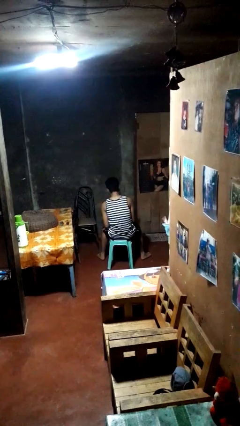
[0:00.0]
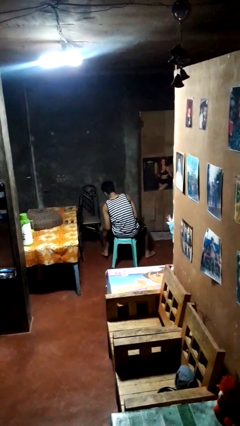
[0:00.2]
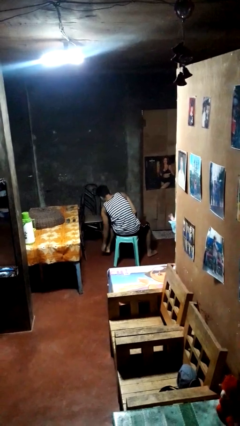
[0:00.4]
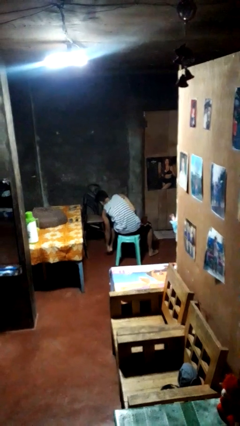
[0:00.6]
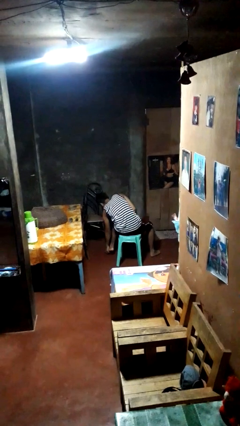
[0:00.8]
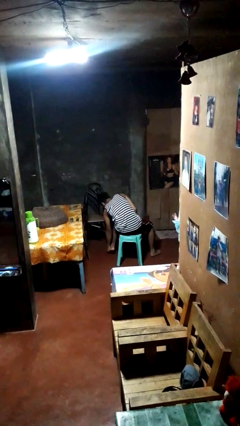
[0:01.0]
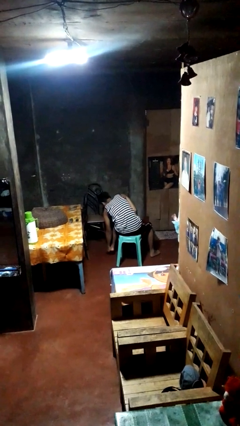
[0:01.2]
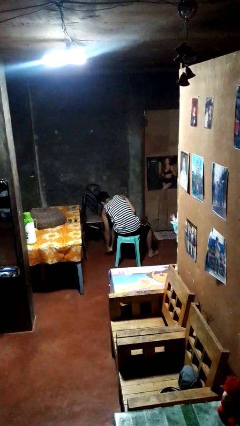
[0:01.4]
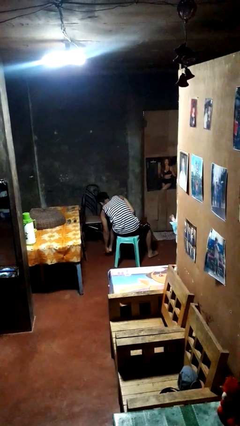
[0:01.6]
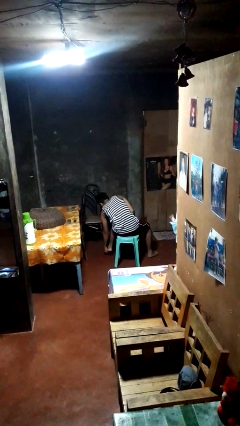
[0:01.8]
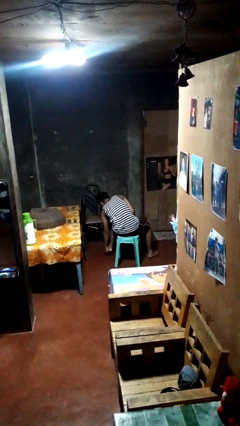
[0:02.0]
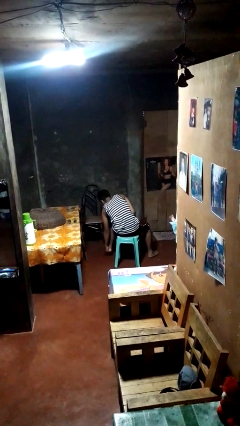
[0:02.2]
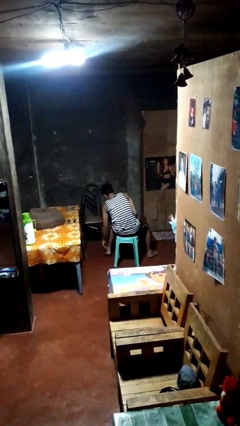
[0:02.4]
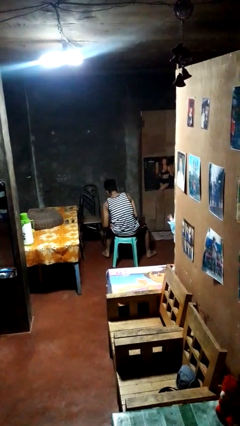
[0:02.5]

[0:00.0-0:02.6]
person rubs foot

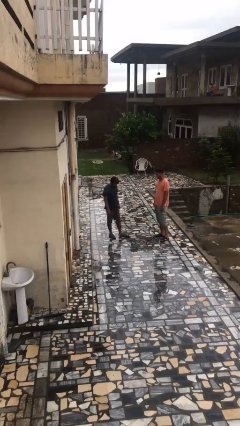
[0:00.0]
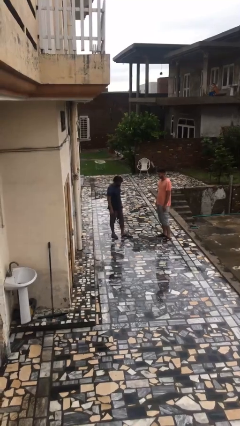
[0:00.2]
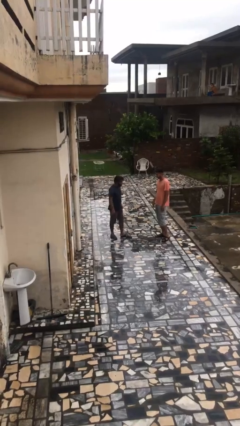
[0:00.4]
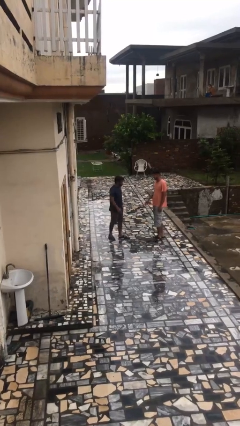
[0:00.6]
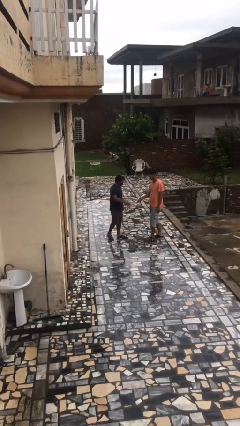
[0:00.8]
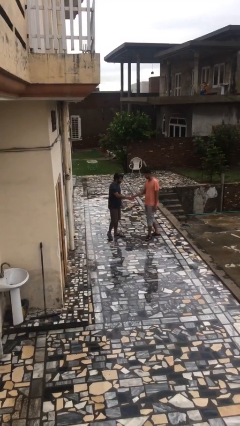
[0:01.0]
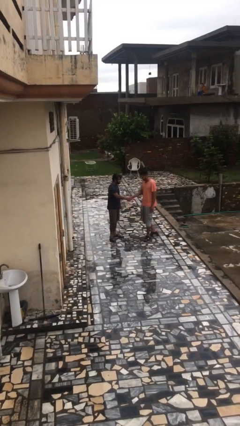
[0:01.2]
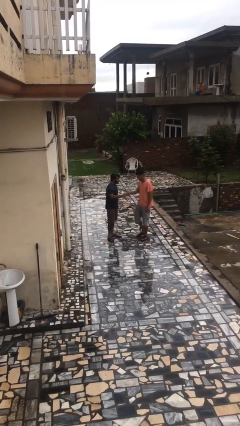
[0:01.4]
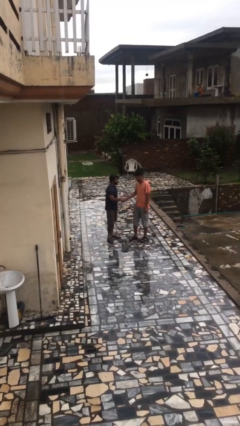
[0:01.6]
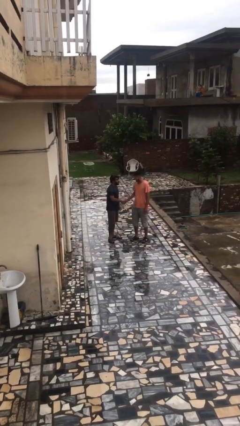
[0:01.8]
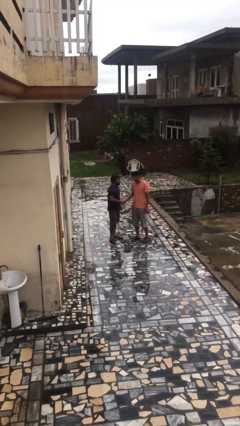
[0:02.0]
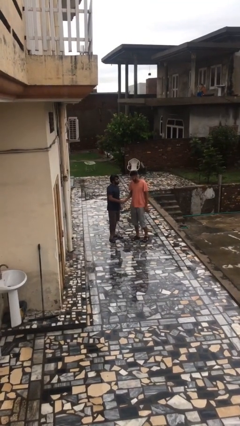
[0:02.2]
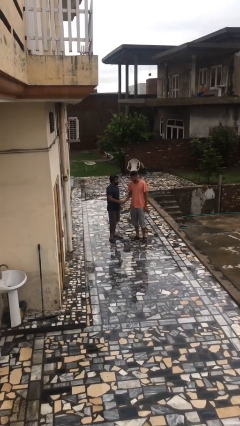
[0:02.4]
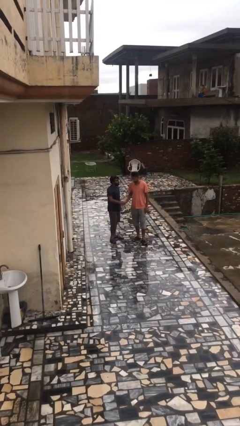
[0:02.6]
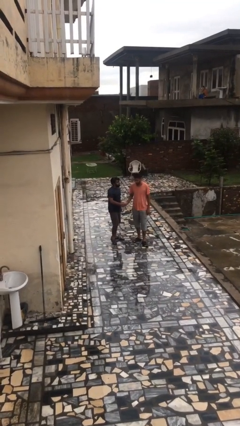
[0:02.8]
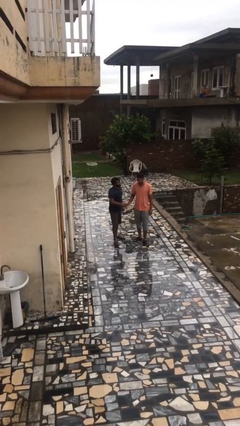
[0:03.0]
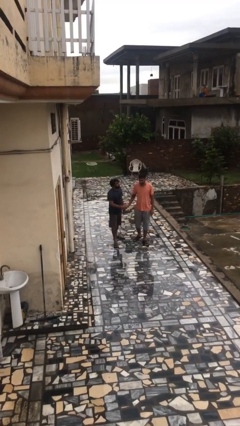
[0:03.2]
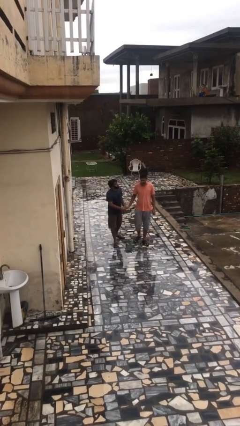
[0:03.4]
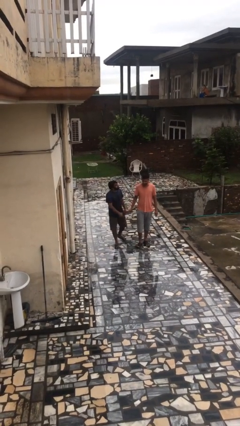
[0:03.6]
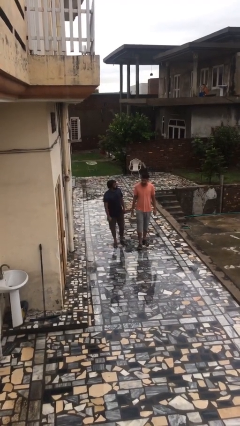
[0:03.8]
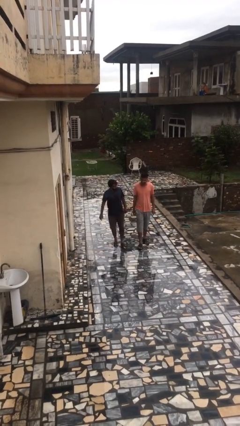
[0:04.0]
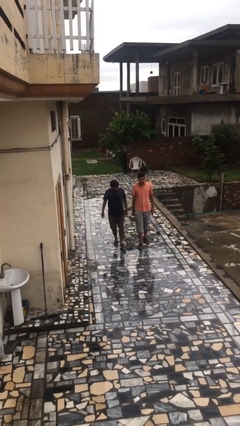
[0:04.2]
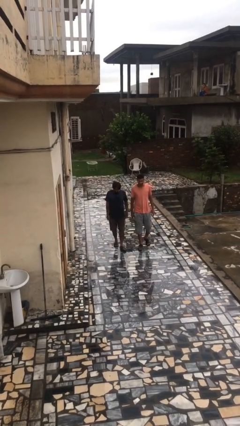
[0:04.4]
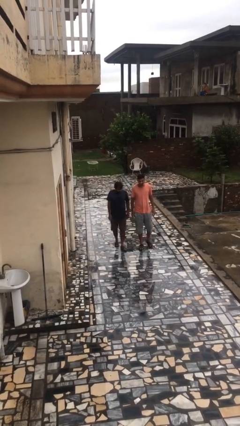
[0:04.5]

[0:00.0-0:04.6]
person shakes hand

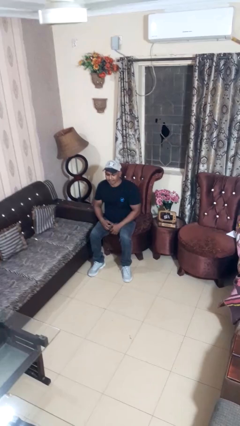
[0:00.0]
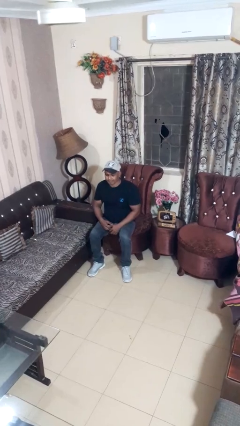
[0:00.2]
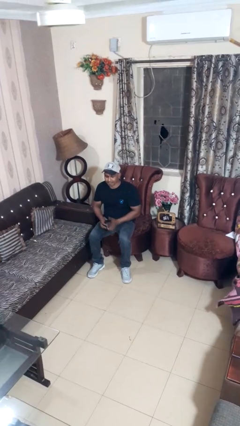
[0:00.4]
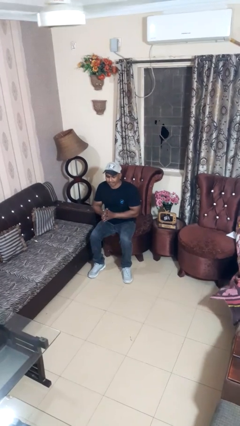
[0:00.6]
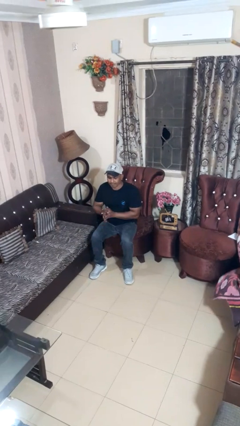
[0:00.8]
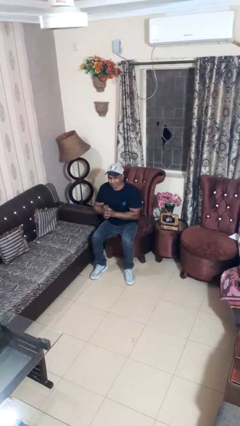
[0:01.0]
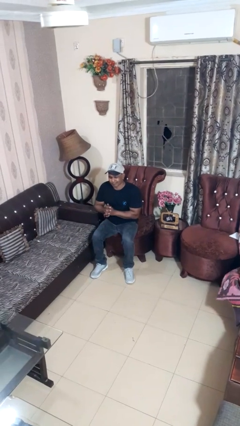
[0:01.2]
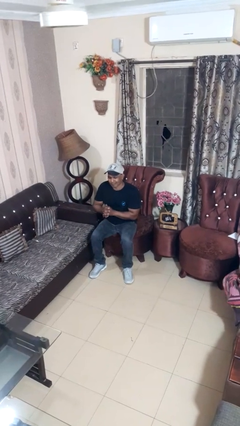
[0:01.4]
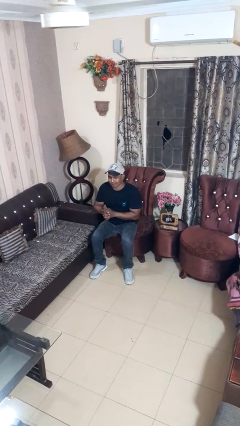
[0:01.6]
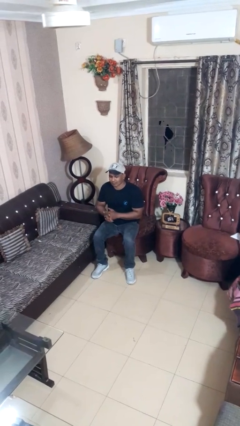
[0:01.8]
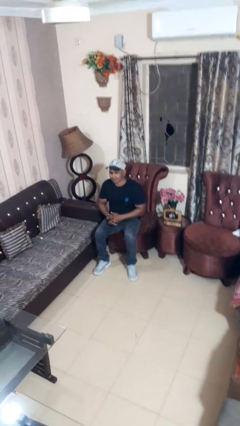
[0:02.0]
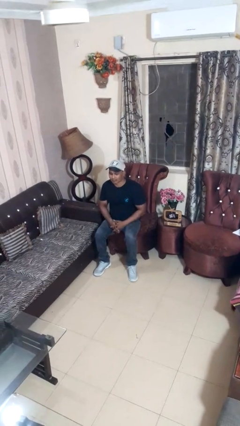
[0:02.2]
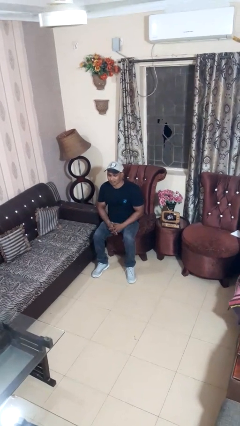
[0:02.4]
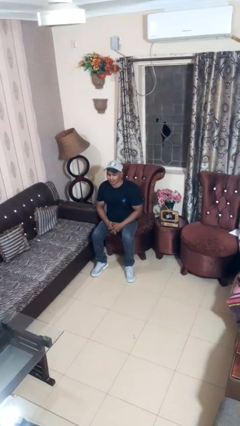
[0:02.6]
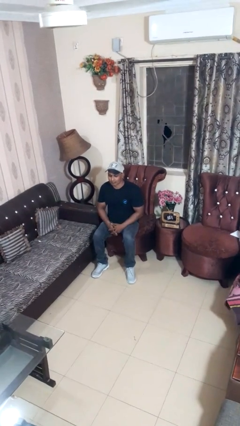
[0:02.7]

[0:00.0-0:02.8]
person cracks knuckles

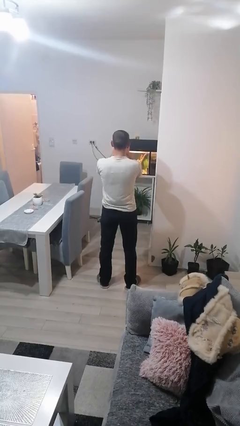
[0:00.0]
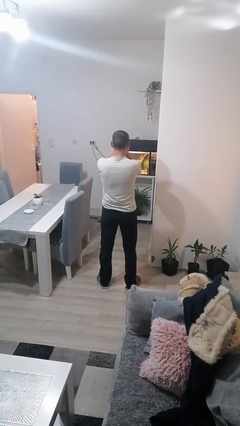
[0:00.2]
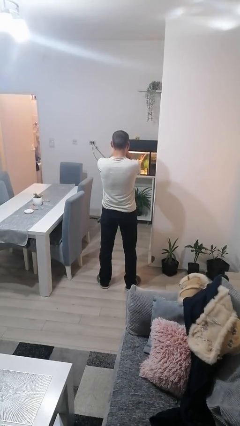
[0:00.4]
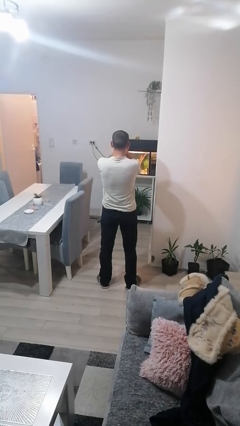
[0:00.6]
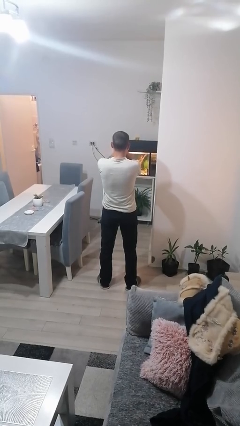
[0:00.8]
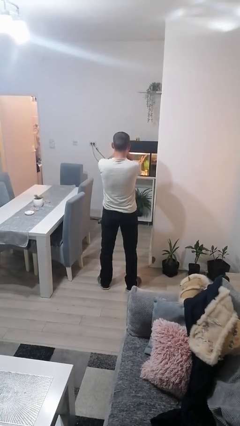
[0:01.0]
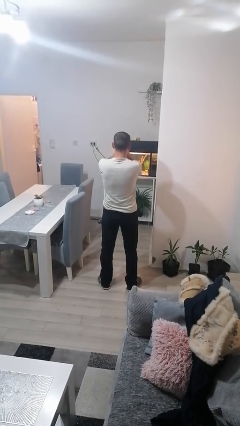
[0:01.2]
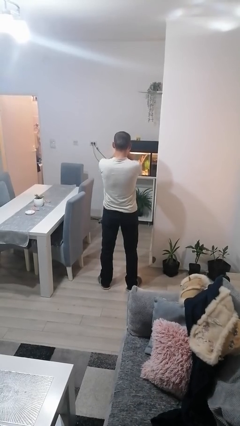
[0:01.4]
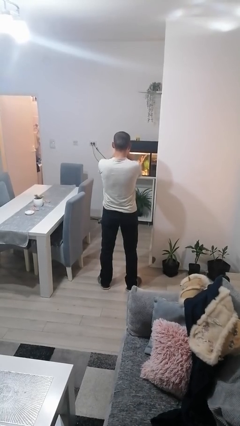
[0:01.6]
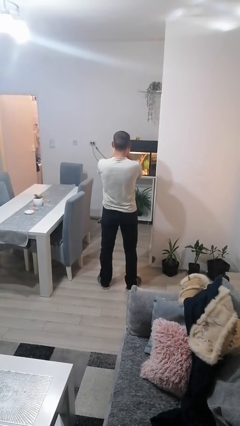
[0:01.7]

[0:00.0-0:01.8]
person covers face with hands

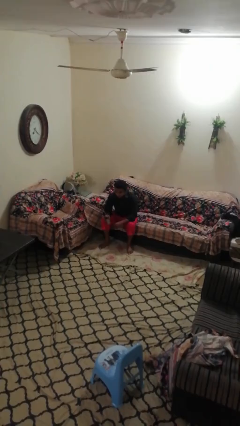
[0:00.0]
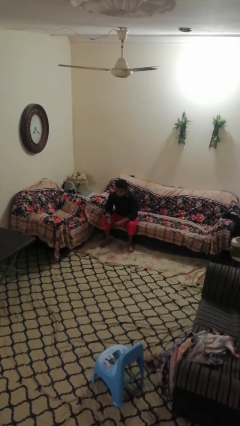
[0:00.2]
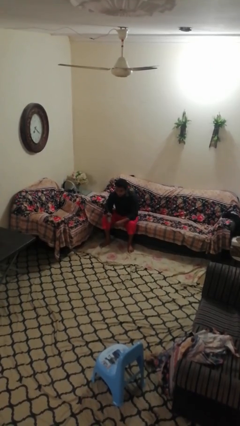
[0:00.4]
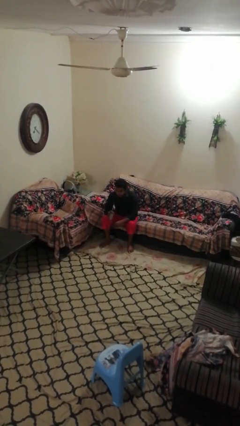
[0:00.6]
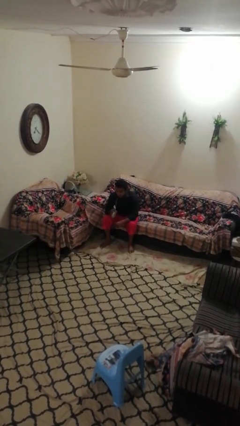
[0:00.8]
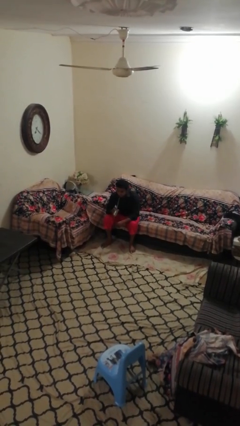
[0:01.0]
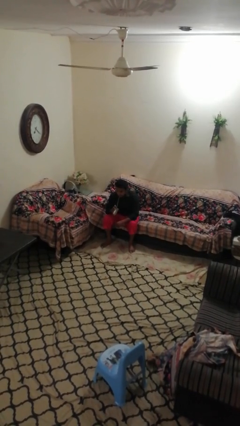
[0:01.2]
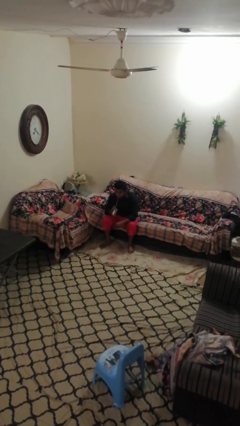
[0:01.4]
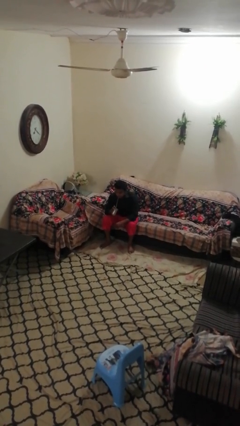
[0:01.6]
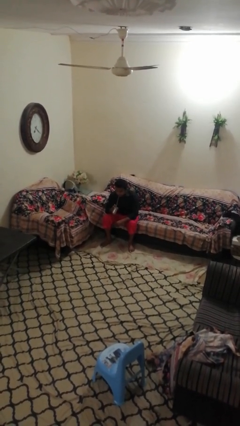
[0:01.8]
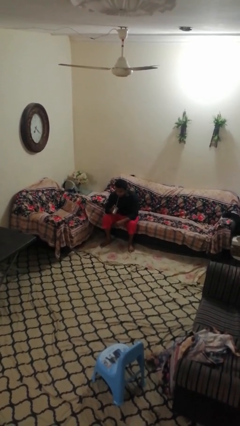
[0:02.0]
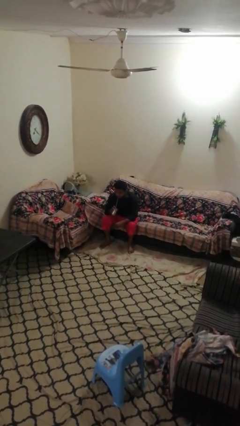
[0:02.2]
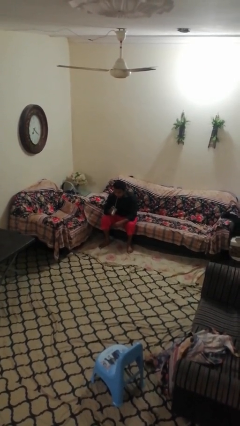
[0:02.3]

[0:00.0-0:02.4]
person drinks from straw

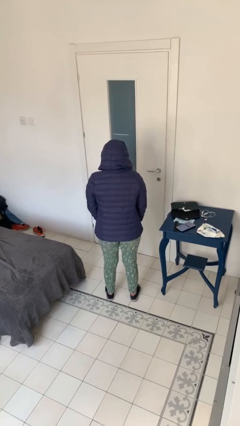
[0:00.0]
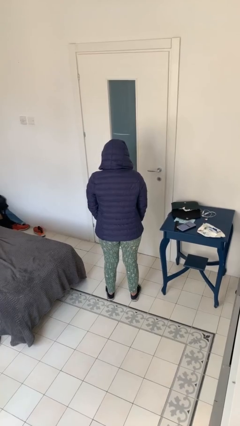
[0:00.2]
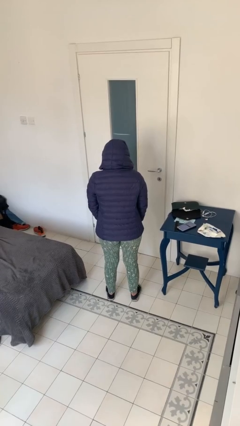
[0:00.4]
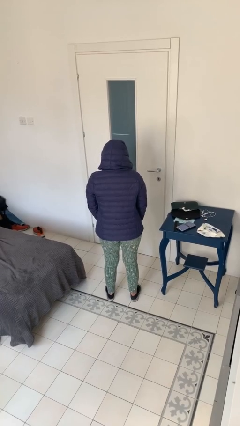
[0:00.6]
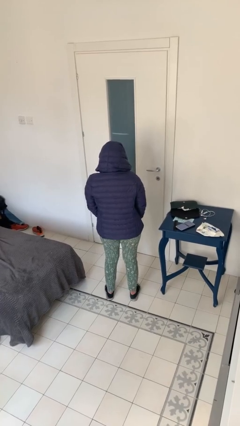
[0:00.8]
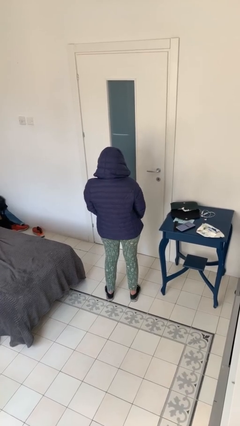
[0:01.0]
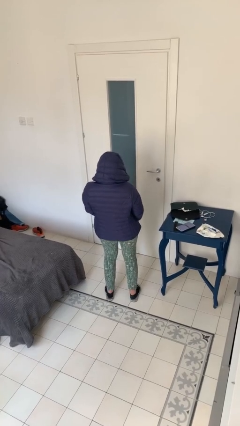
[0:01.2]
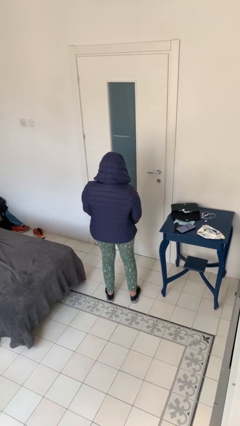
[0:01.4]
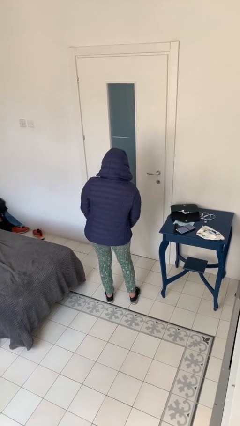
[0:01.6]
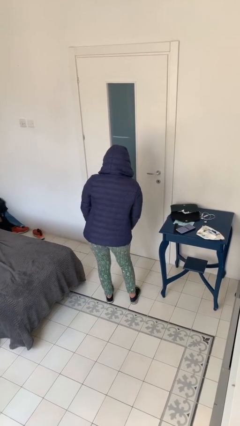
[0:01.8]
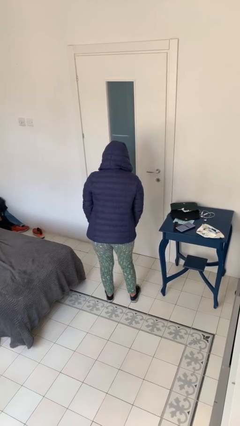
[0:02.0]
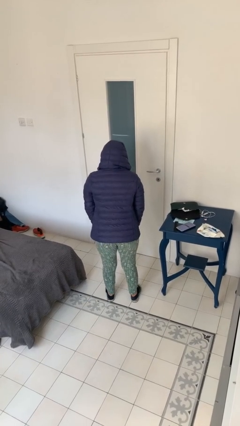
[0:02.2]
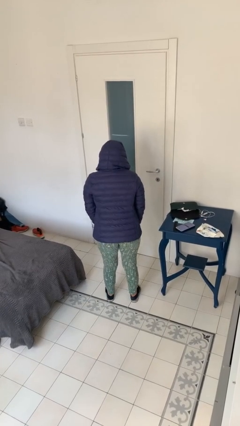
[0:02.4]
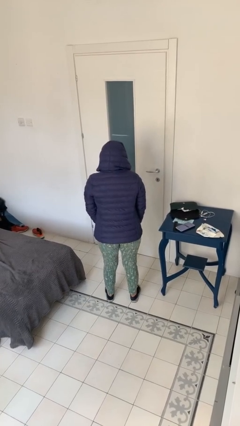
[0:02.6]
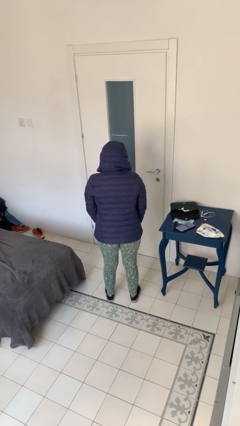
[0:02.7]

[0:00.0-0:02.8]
person wiggles hips
